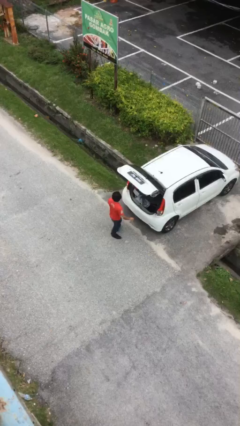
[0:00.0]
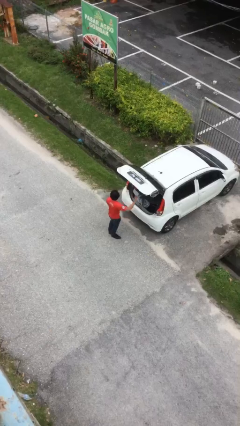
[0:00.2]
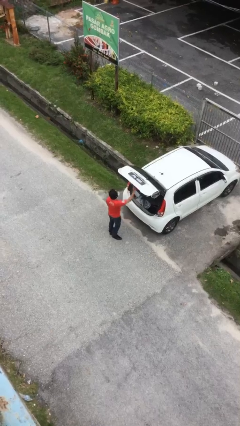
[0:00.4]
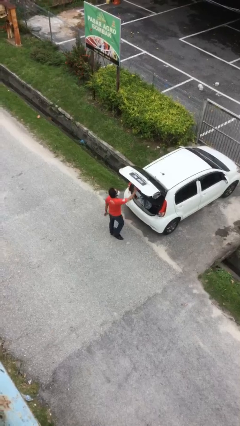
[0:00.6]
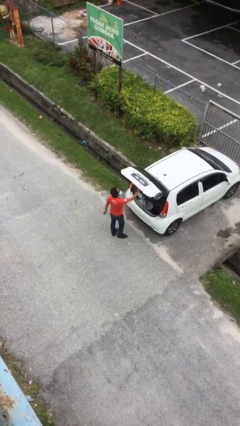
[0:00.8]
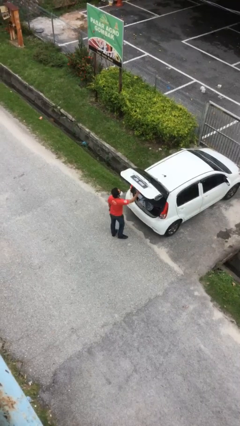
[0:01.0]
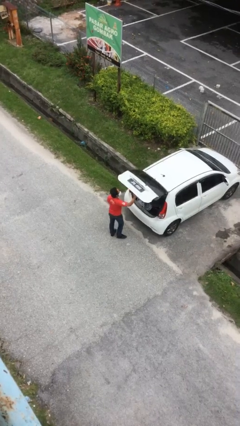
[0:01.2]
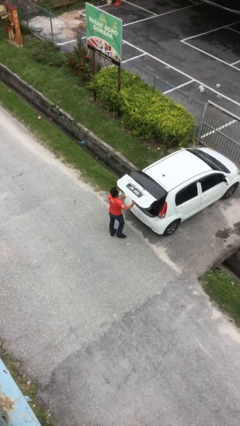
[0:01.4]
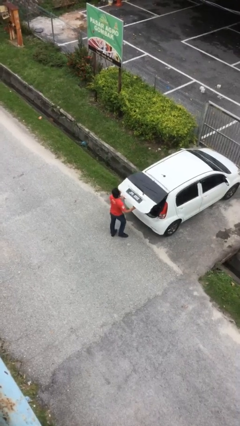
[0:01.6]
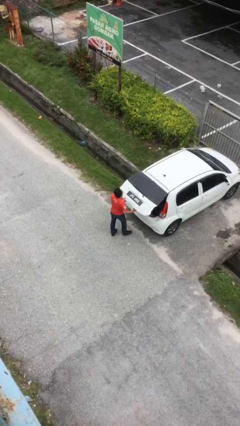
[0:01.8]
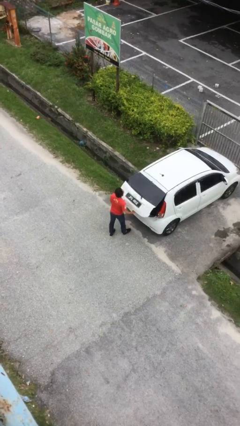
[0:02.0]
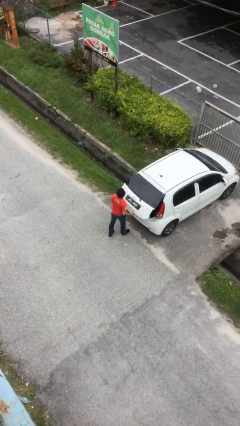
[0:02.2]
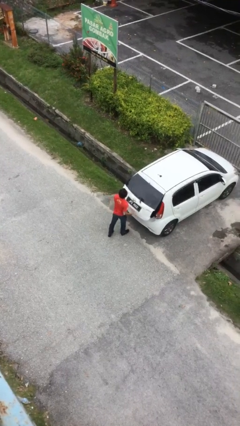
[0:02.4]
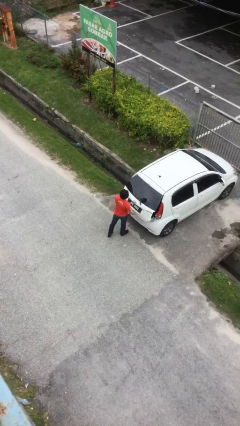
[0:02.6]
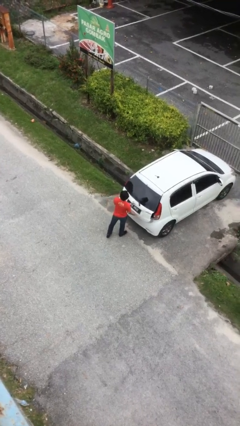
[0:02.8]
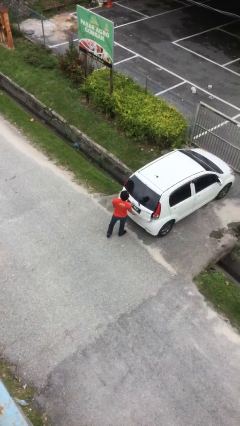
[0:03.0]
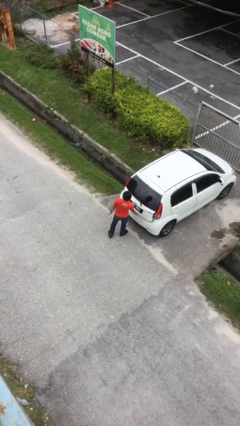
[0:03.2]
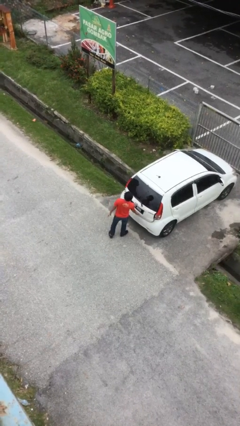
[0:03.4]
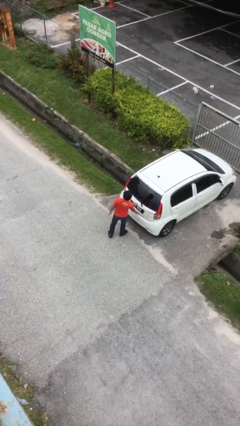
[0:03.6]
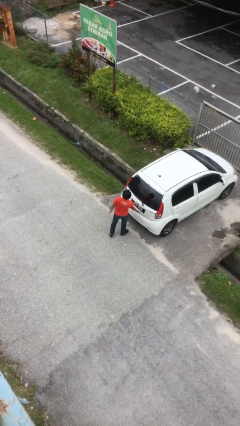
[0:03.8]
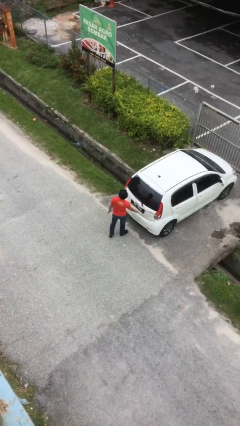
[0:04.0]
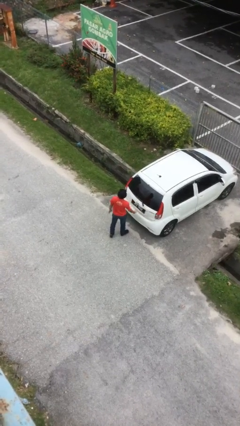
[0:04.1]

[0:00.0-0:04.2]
person closes car trunk

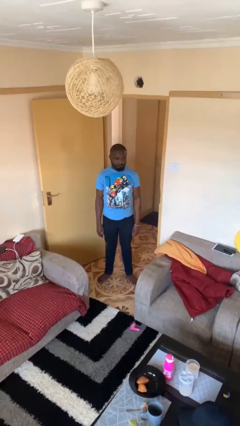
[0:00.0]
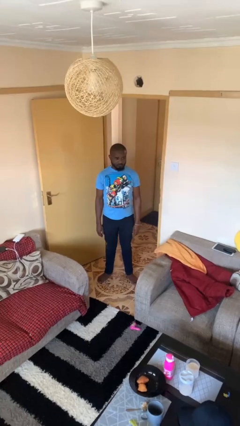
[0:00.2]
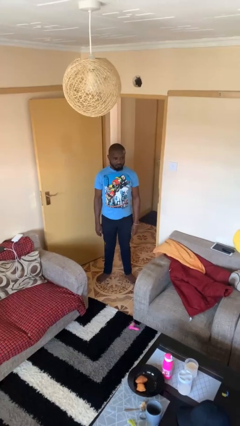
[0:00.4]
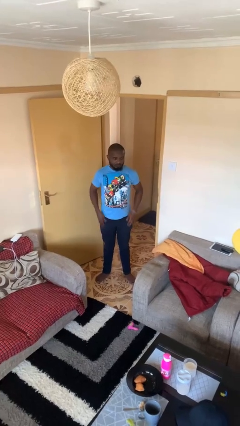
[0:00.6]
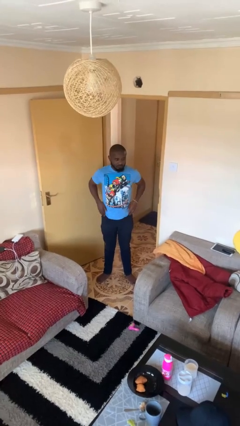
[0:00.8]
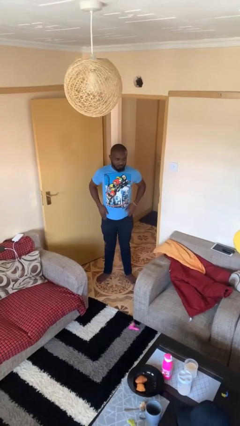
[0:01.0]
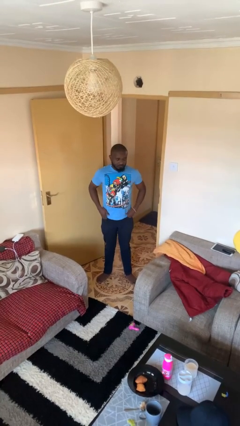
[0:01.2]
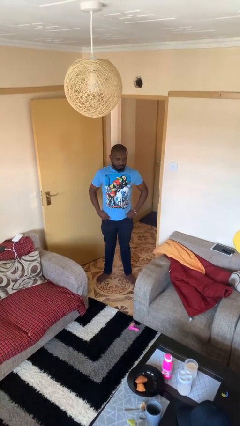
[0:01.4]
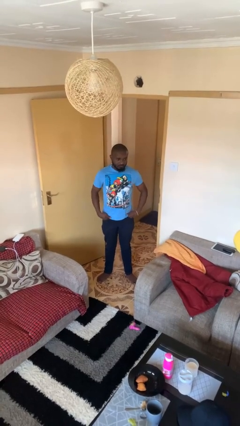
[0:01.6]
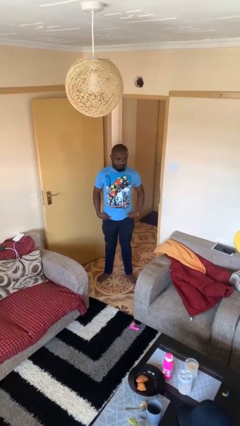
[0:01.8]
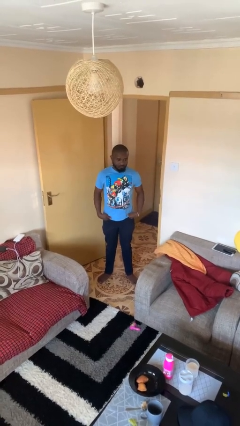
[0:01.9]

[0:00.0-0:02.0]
person puts hands in back pockets

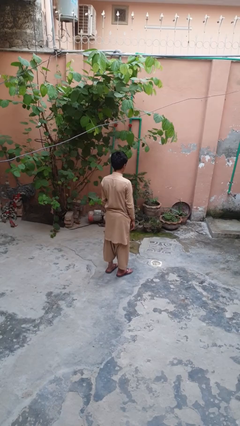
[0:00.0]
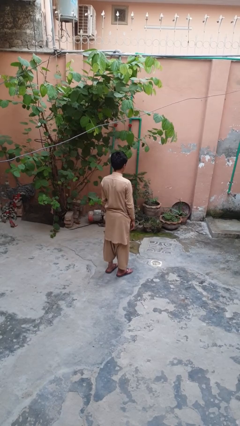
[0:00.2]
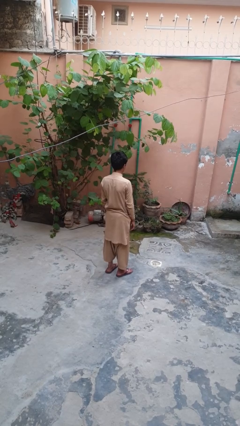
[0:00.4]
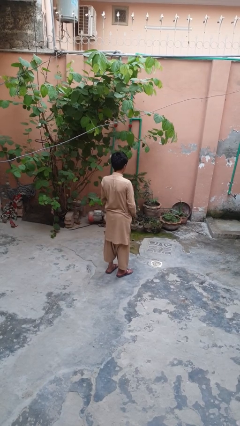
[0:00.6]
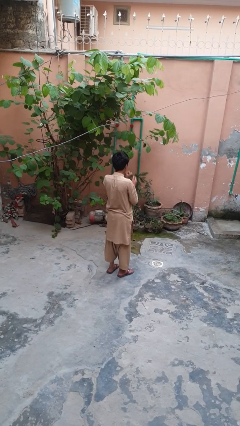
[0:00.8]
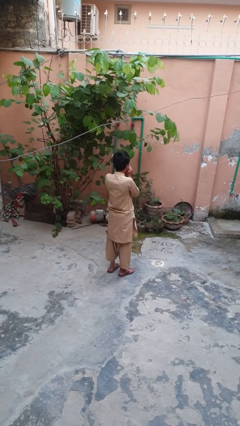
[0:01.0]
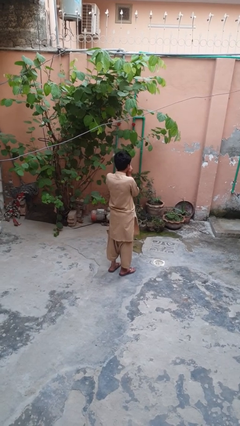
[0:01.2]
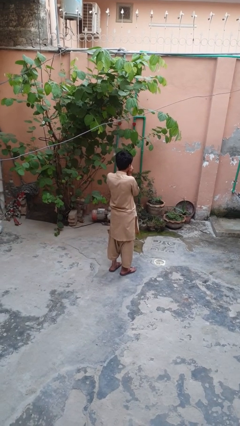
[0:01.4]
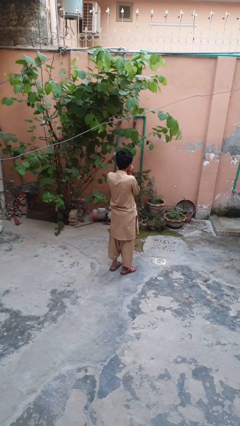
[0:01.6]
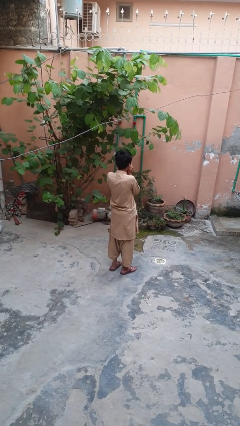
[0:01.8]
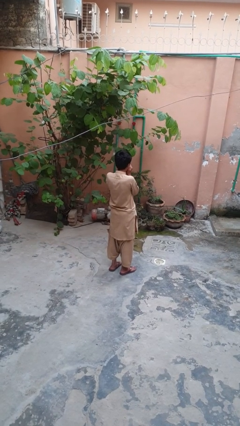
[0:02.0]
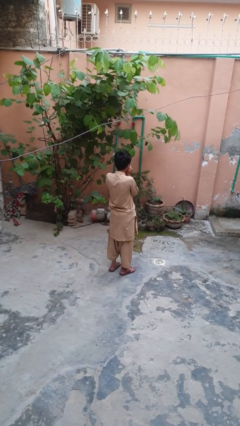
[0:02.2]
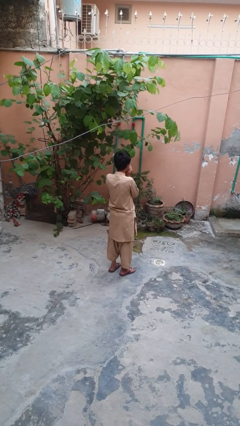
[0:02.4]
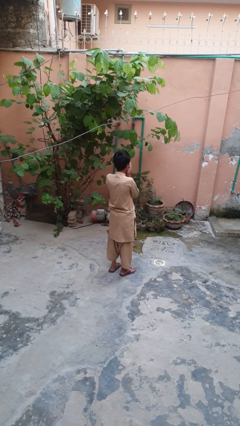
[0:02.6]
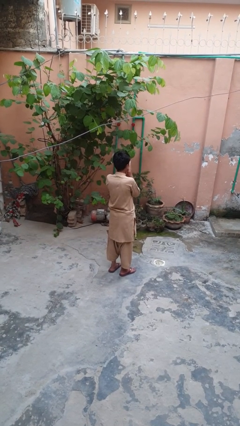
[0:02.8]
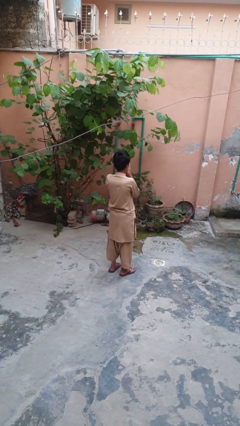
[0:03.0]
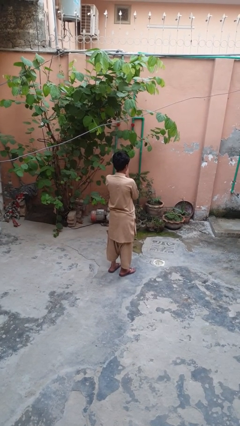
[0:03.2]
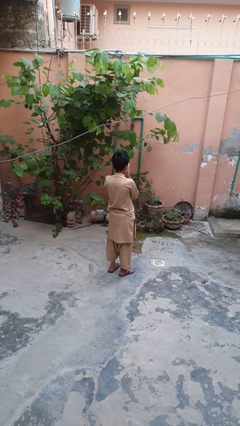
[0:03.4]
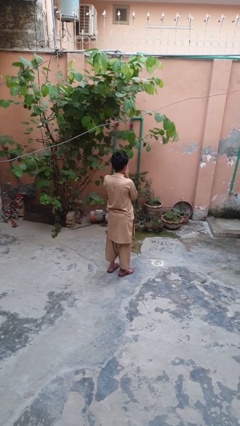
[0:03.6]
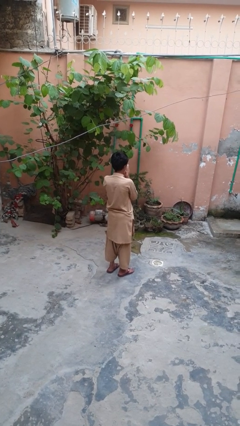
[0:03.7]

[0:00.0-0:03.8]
person blows into hands

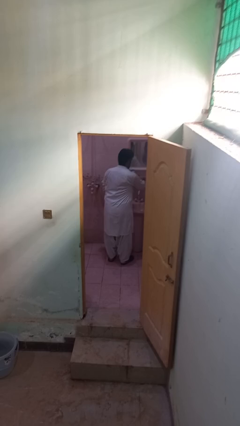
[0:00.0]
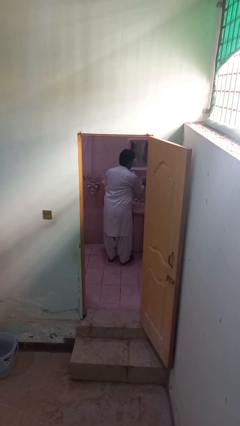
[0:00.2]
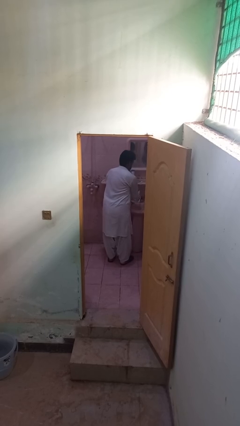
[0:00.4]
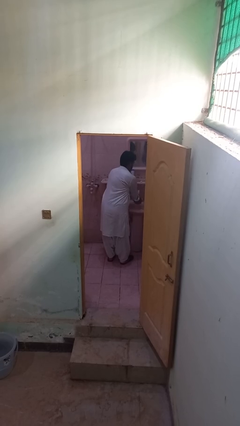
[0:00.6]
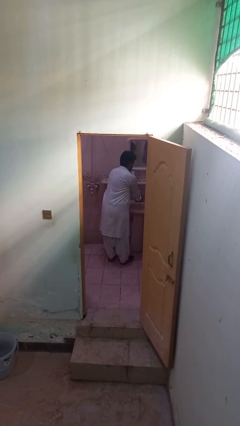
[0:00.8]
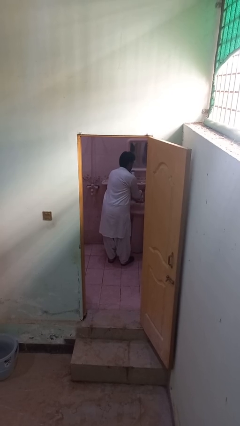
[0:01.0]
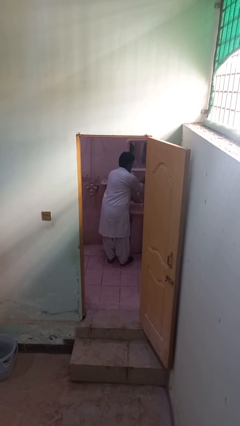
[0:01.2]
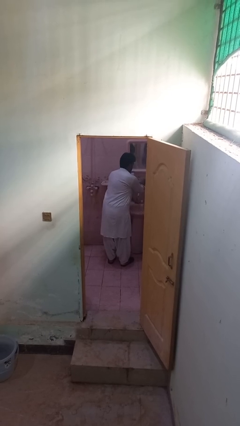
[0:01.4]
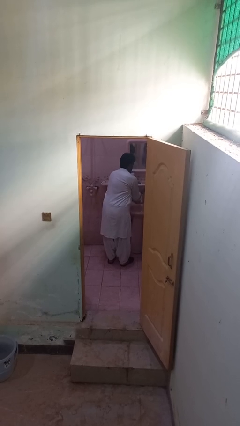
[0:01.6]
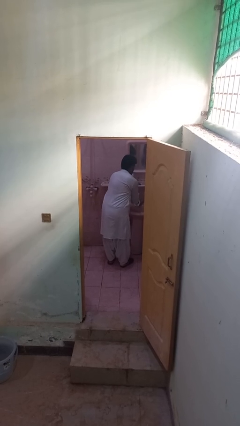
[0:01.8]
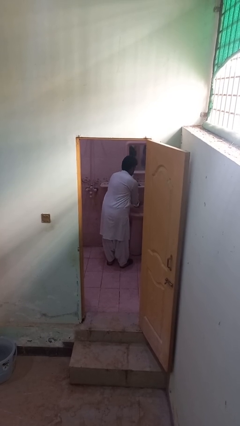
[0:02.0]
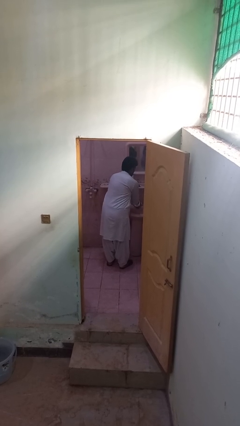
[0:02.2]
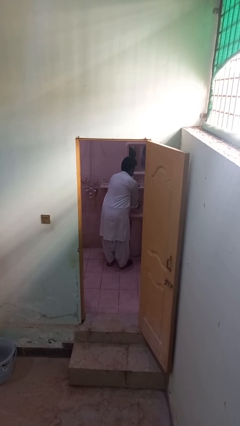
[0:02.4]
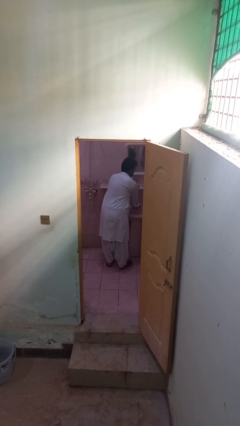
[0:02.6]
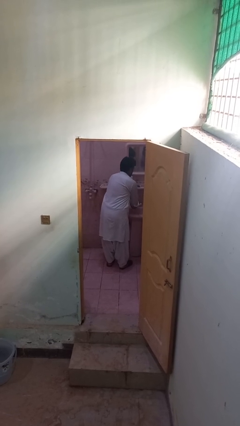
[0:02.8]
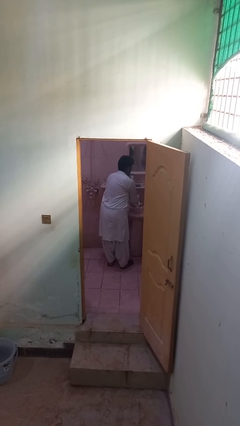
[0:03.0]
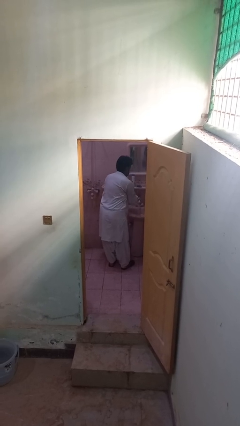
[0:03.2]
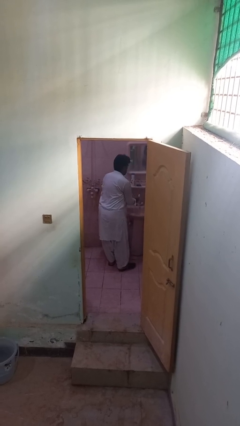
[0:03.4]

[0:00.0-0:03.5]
person washes hands

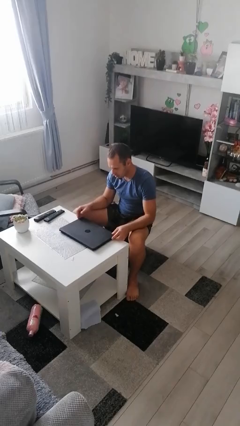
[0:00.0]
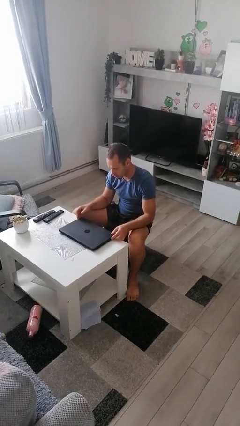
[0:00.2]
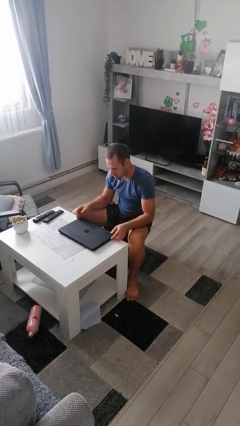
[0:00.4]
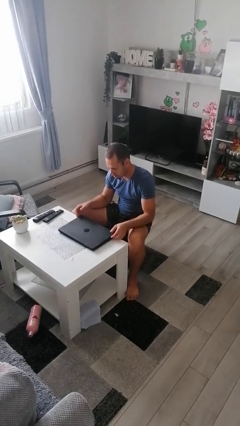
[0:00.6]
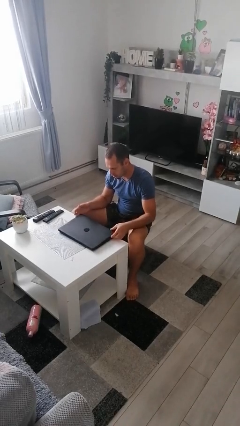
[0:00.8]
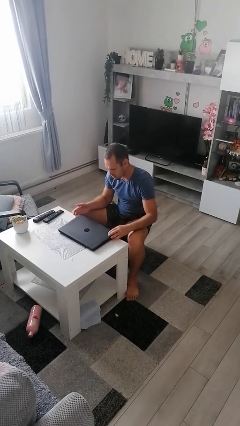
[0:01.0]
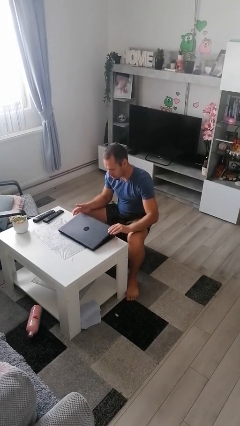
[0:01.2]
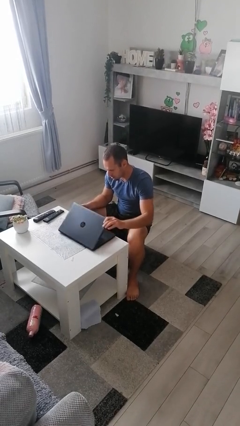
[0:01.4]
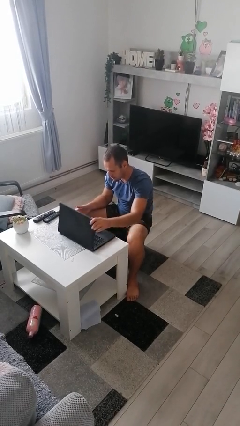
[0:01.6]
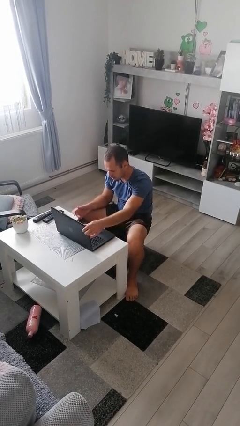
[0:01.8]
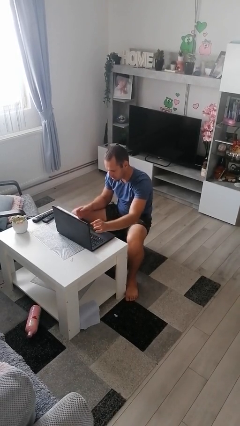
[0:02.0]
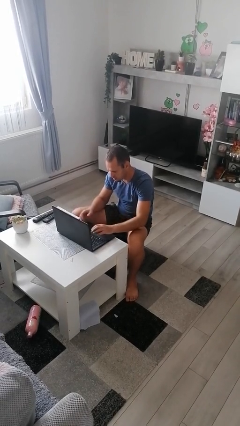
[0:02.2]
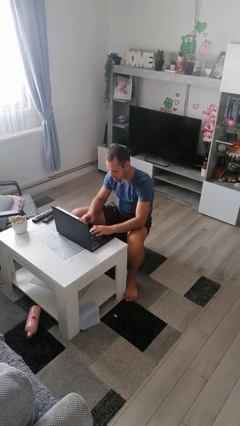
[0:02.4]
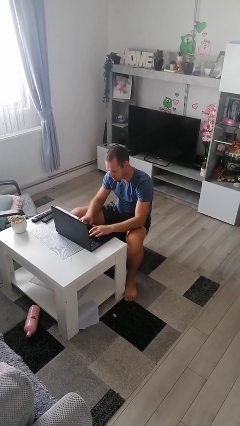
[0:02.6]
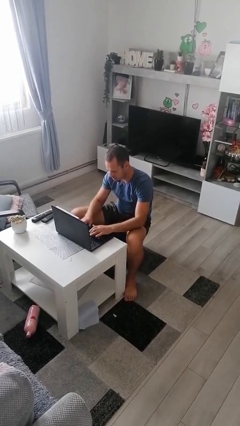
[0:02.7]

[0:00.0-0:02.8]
person opens laptop

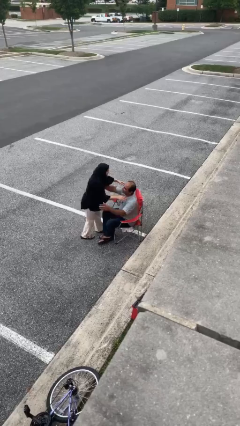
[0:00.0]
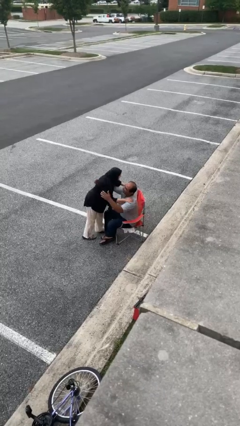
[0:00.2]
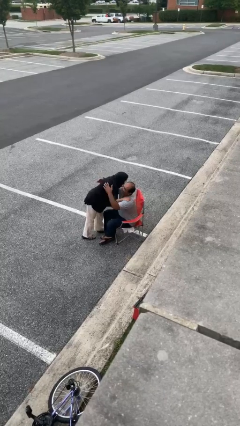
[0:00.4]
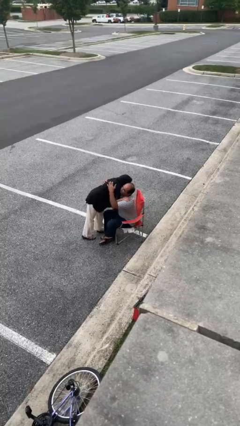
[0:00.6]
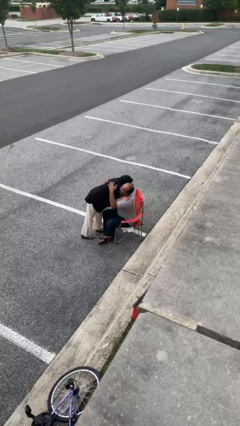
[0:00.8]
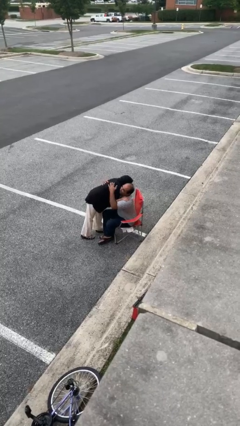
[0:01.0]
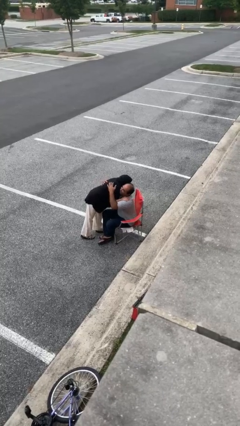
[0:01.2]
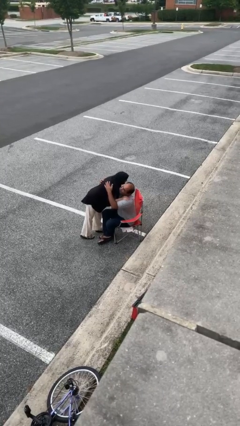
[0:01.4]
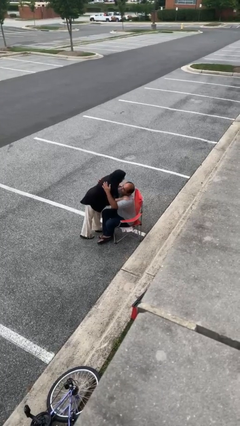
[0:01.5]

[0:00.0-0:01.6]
person embraces person
